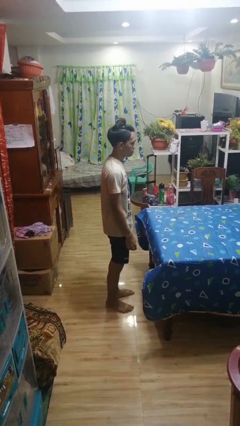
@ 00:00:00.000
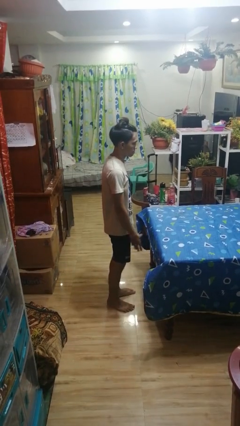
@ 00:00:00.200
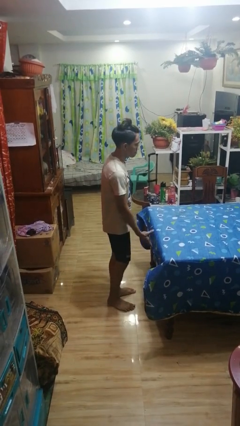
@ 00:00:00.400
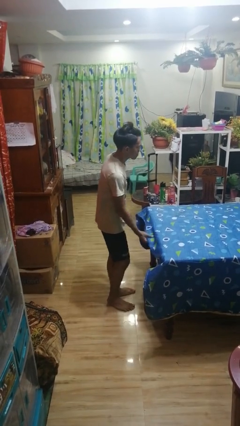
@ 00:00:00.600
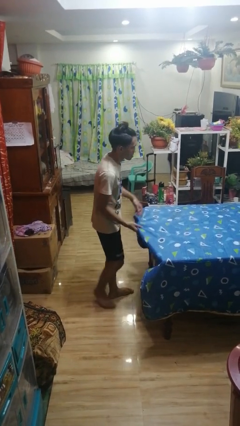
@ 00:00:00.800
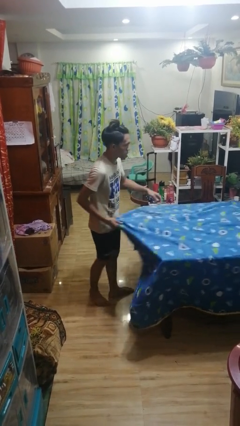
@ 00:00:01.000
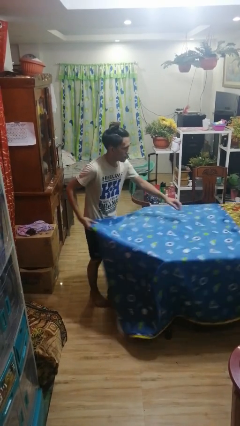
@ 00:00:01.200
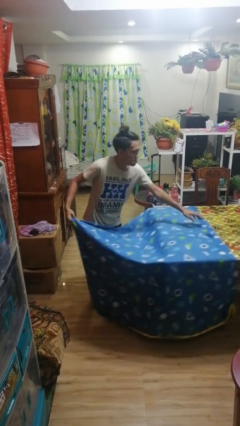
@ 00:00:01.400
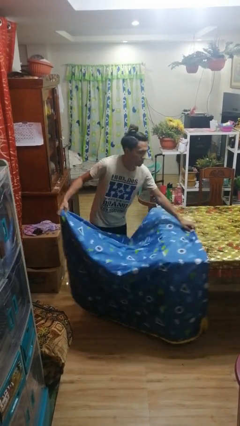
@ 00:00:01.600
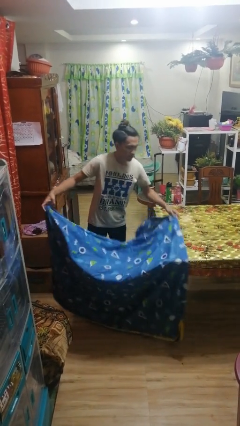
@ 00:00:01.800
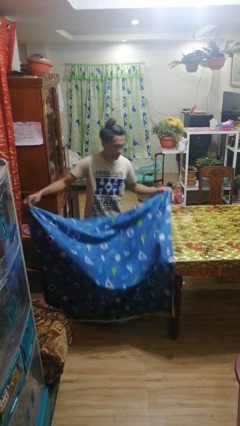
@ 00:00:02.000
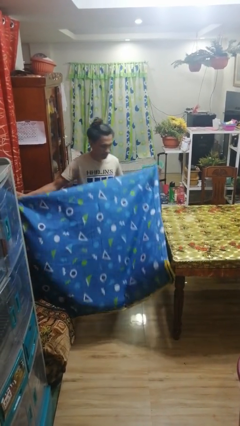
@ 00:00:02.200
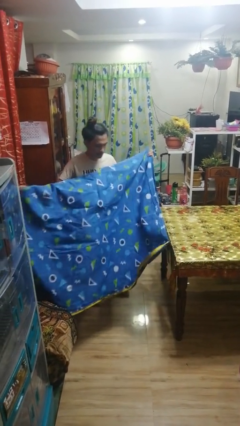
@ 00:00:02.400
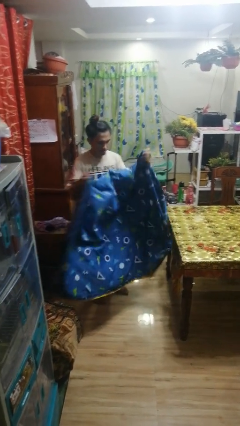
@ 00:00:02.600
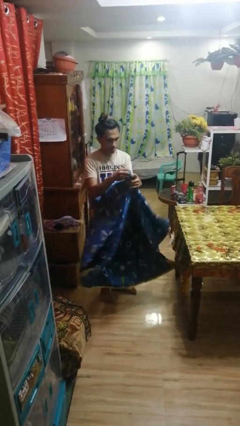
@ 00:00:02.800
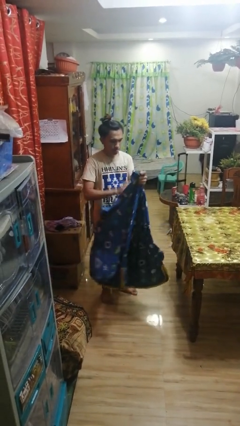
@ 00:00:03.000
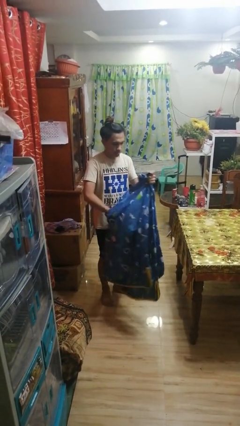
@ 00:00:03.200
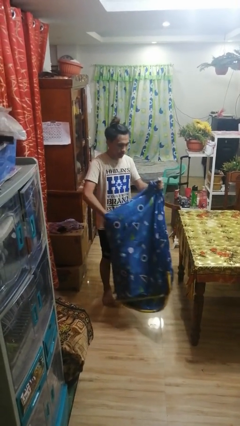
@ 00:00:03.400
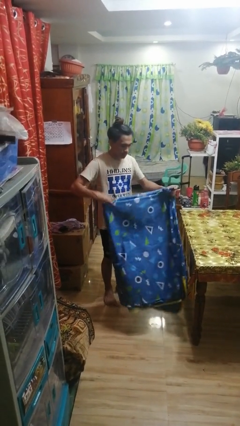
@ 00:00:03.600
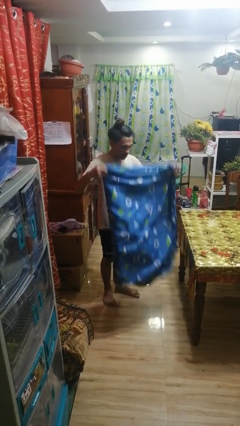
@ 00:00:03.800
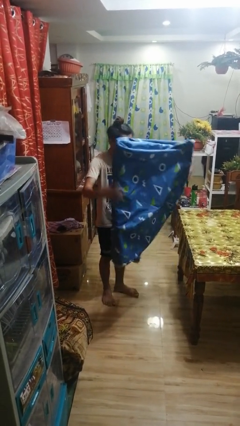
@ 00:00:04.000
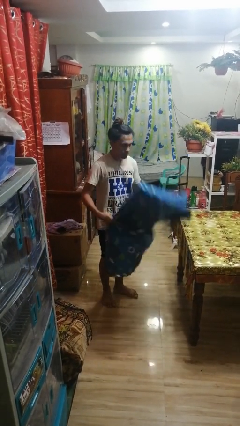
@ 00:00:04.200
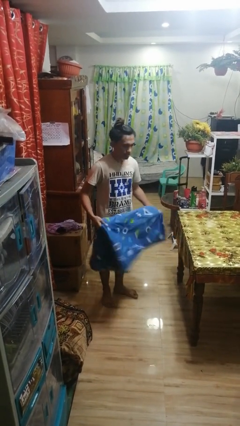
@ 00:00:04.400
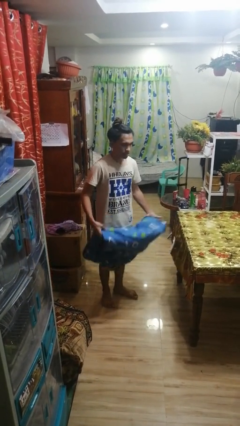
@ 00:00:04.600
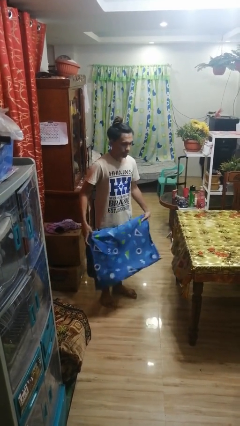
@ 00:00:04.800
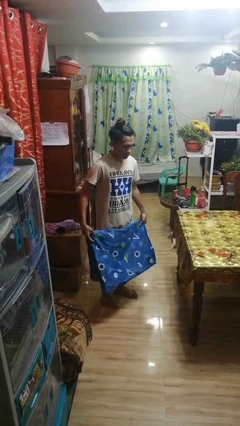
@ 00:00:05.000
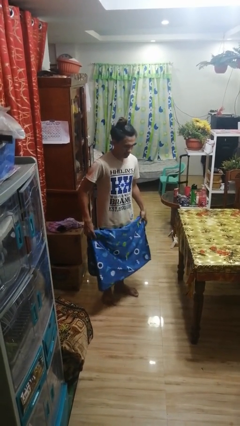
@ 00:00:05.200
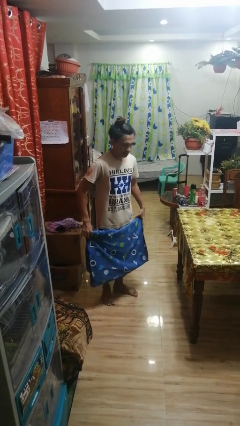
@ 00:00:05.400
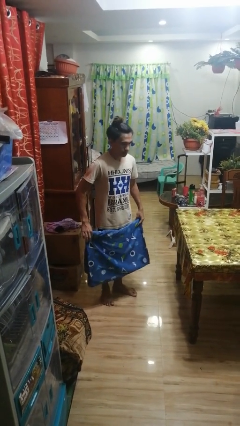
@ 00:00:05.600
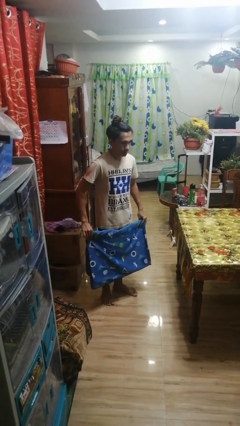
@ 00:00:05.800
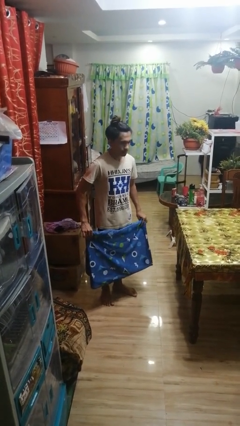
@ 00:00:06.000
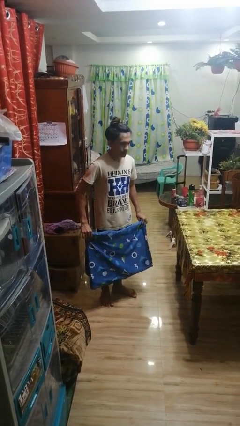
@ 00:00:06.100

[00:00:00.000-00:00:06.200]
person folds tablecloth

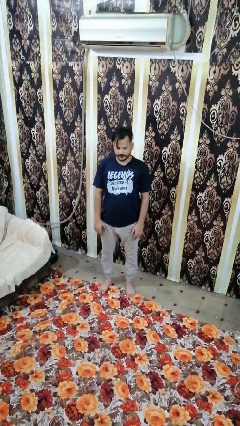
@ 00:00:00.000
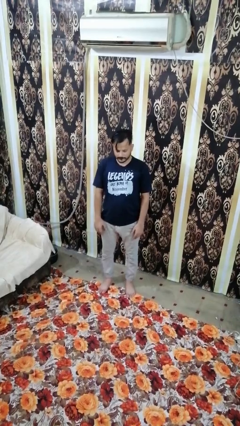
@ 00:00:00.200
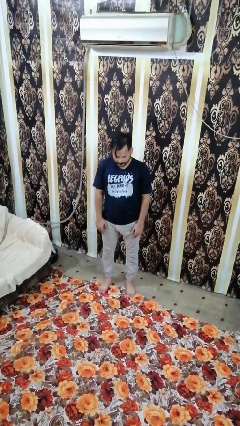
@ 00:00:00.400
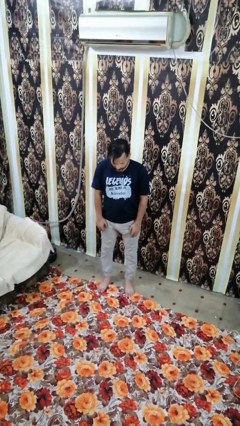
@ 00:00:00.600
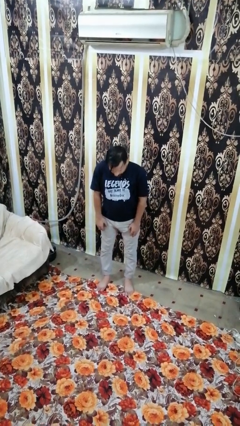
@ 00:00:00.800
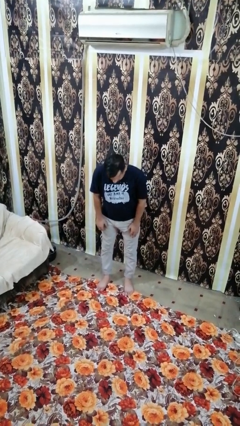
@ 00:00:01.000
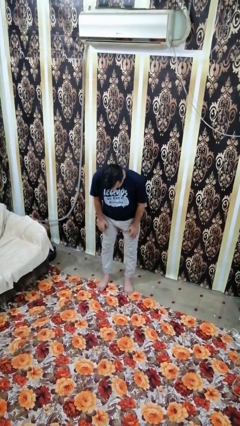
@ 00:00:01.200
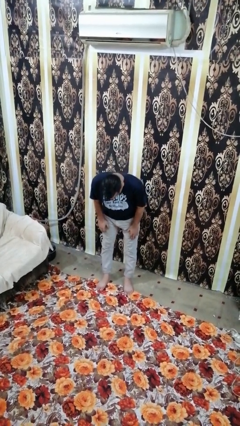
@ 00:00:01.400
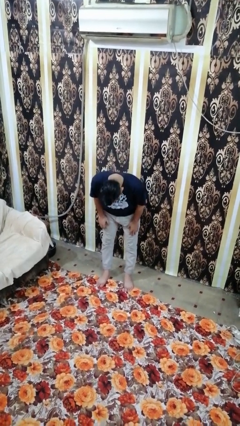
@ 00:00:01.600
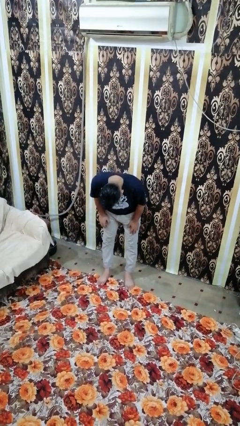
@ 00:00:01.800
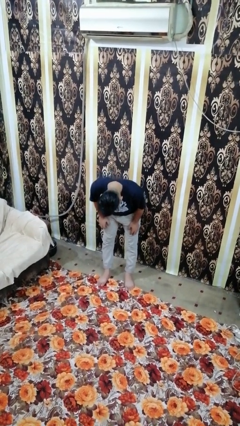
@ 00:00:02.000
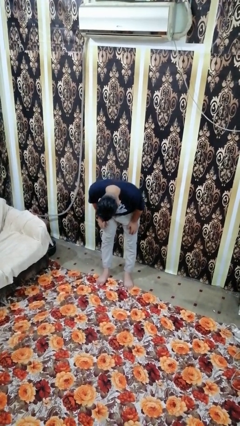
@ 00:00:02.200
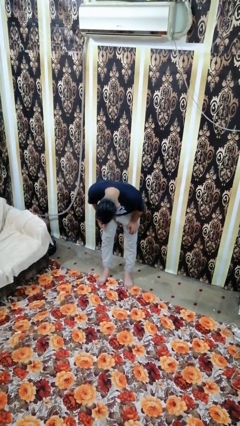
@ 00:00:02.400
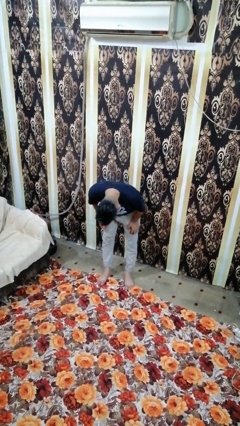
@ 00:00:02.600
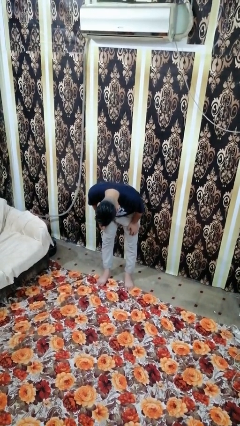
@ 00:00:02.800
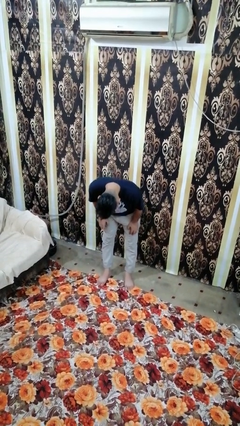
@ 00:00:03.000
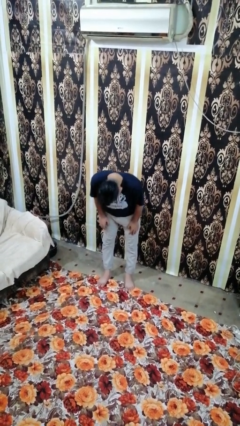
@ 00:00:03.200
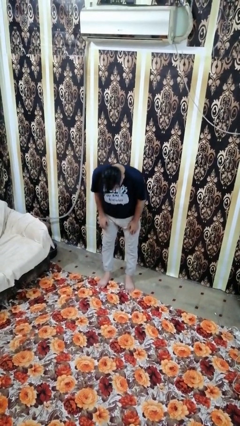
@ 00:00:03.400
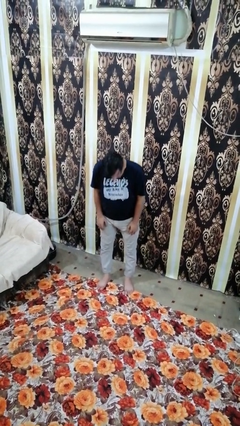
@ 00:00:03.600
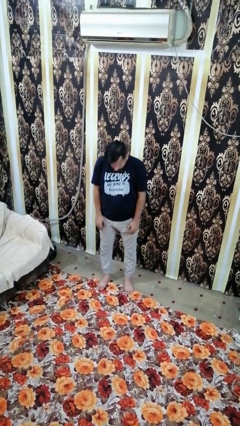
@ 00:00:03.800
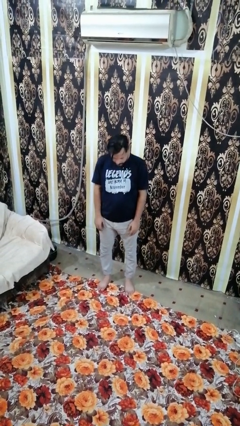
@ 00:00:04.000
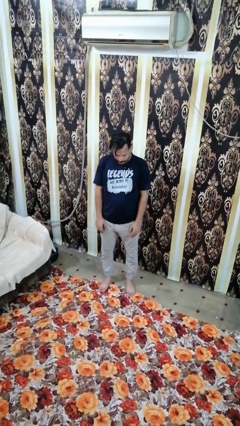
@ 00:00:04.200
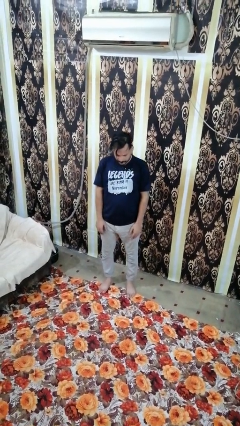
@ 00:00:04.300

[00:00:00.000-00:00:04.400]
person bows

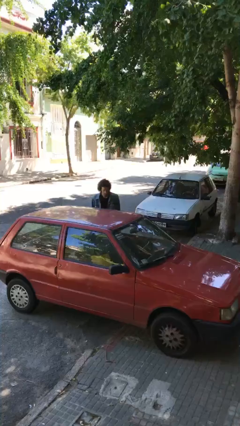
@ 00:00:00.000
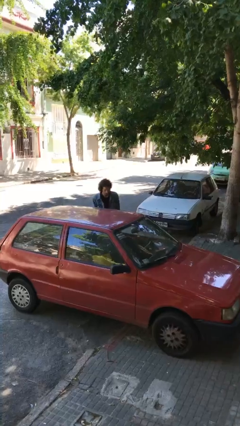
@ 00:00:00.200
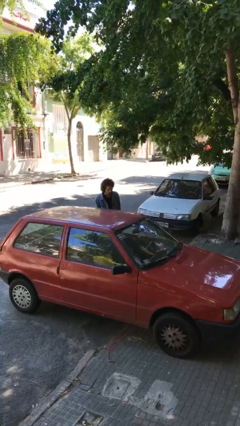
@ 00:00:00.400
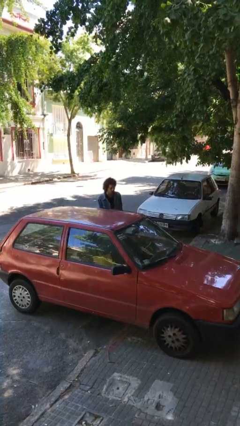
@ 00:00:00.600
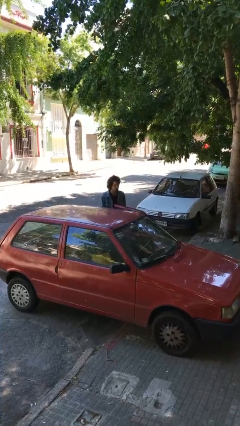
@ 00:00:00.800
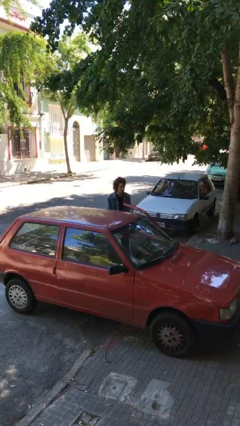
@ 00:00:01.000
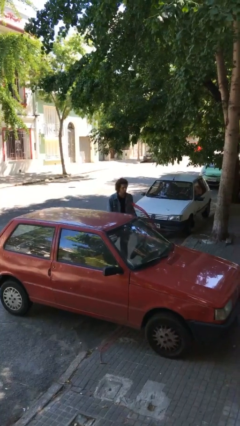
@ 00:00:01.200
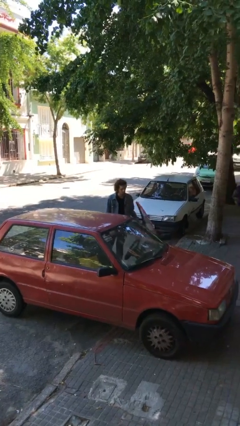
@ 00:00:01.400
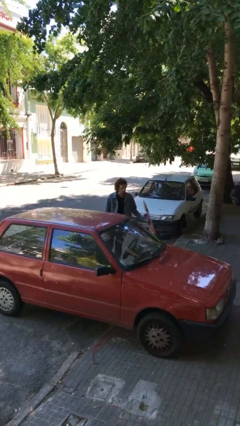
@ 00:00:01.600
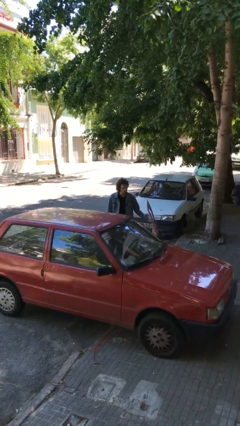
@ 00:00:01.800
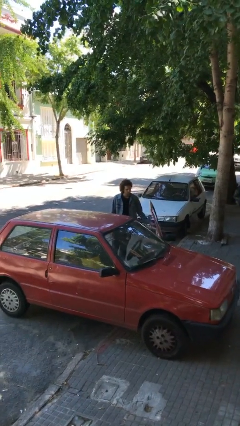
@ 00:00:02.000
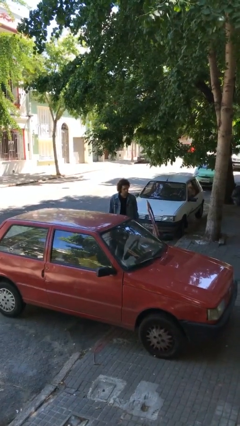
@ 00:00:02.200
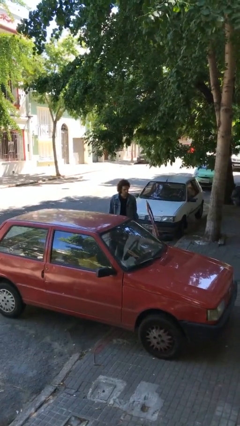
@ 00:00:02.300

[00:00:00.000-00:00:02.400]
person opens car door

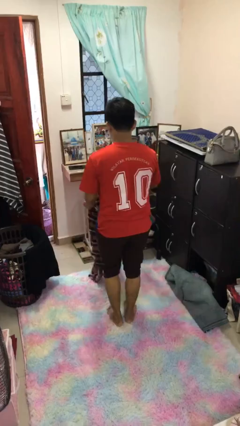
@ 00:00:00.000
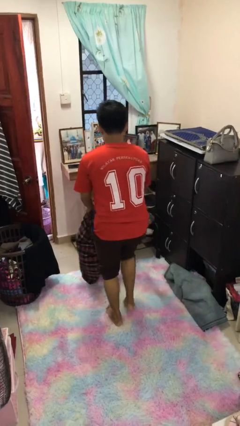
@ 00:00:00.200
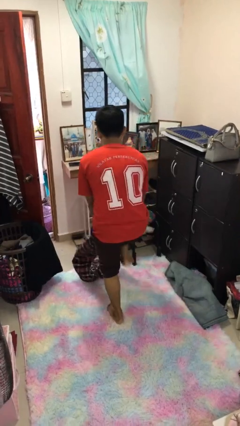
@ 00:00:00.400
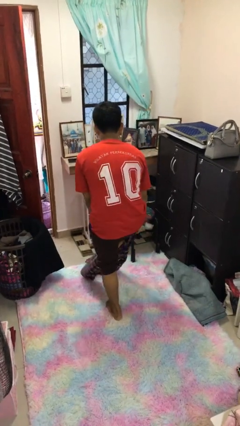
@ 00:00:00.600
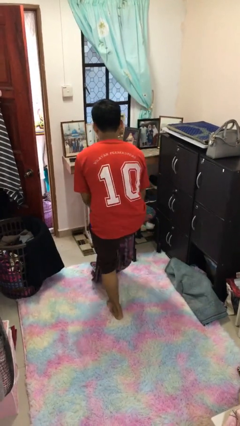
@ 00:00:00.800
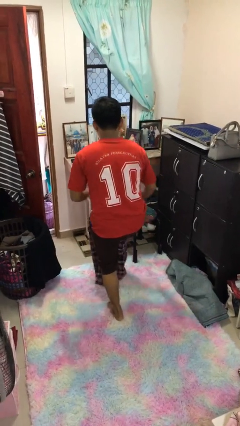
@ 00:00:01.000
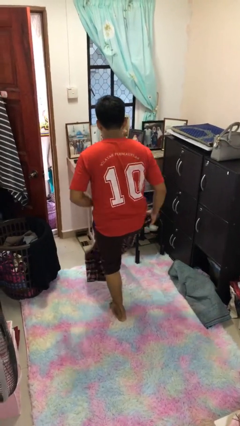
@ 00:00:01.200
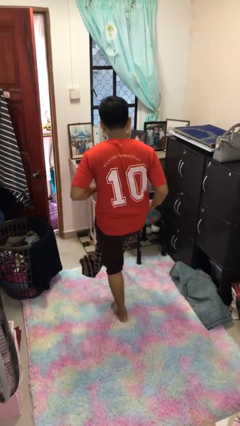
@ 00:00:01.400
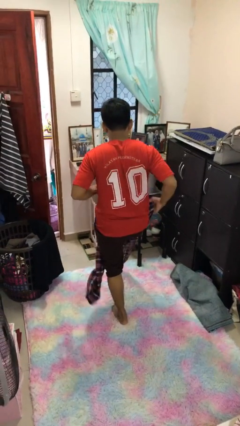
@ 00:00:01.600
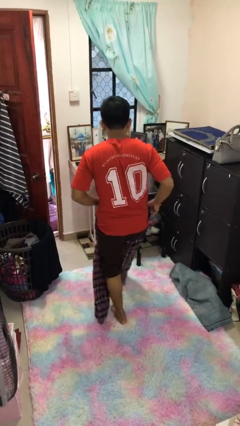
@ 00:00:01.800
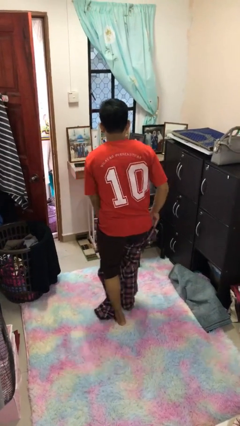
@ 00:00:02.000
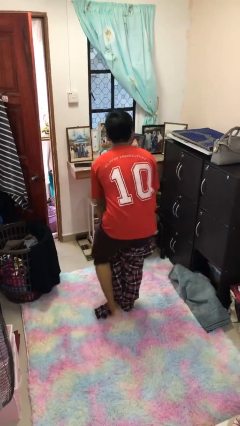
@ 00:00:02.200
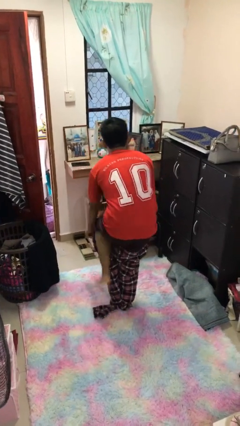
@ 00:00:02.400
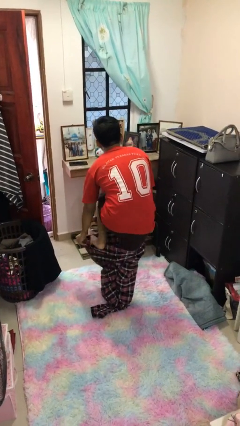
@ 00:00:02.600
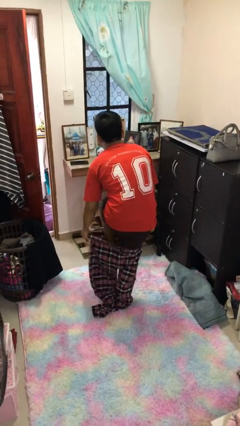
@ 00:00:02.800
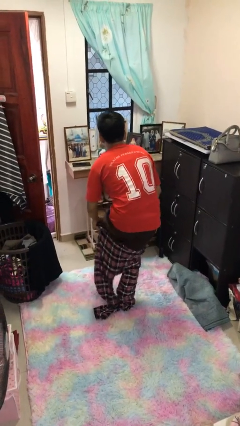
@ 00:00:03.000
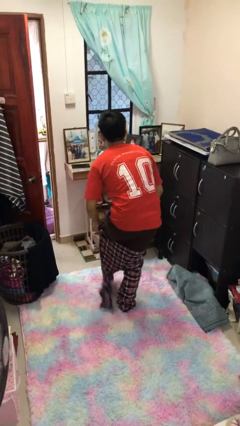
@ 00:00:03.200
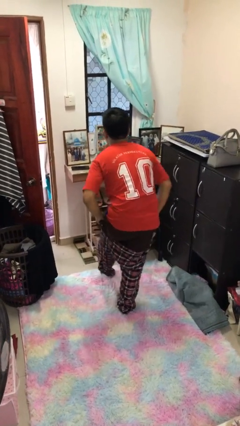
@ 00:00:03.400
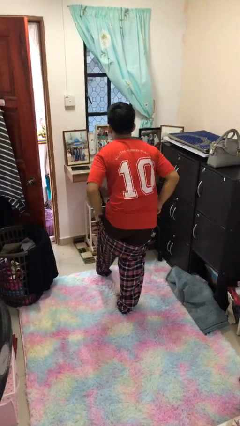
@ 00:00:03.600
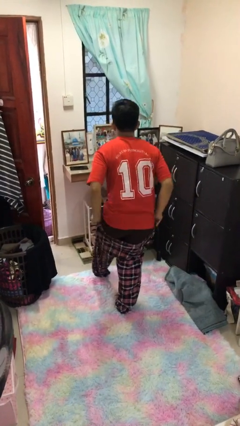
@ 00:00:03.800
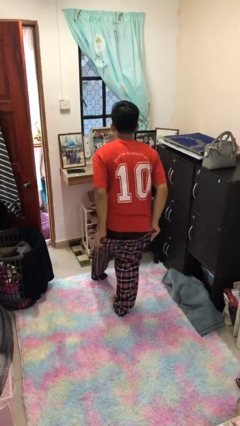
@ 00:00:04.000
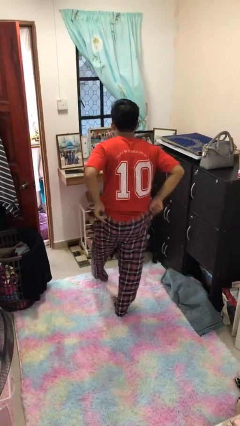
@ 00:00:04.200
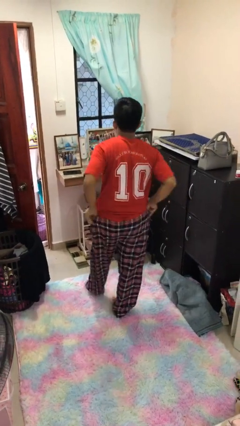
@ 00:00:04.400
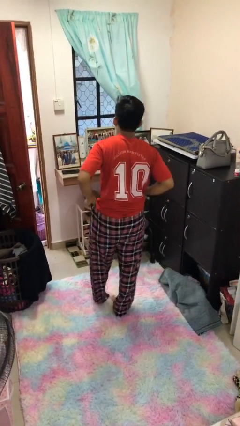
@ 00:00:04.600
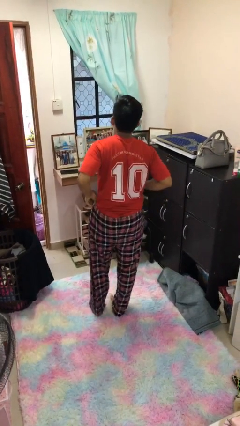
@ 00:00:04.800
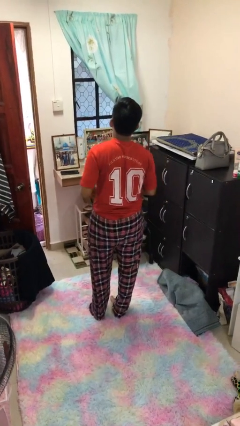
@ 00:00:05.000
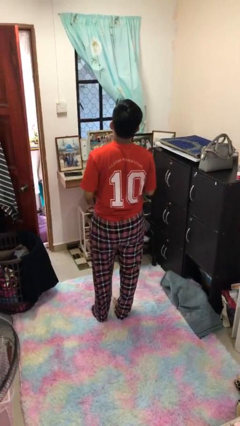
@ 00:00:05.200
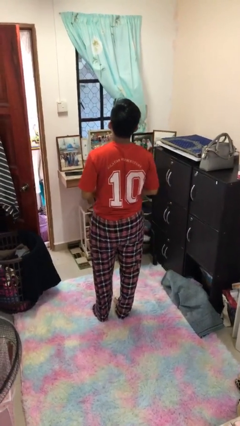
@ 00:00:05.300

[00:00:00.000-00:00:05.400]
person puts on pants
